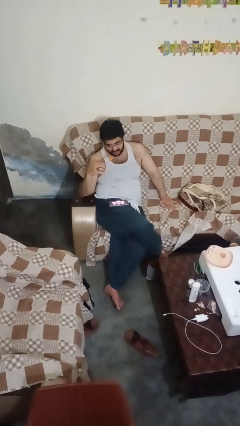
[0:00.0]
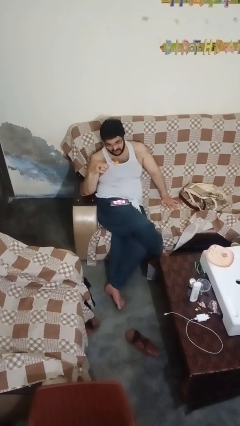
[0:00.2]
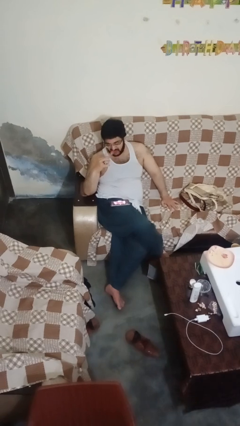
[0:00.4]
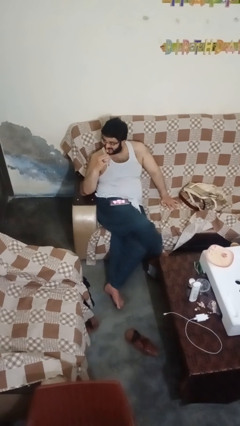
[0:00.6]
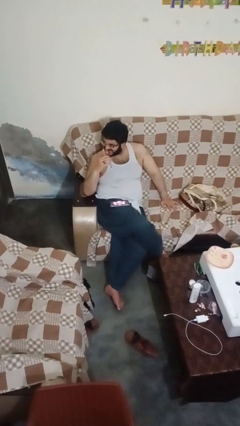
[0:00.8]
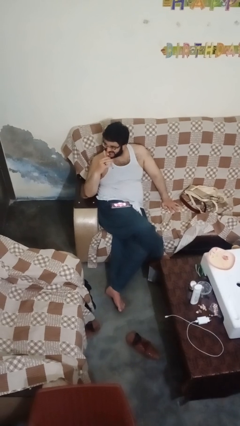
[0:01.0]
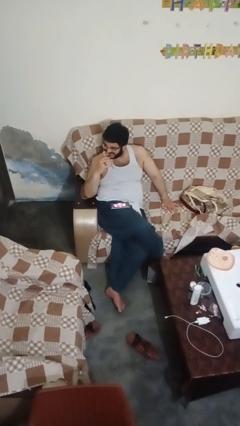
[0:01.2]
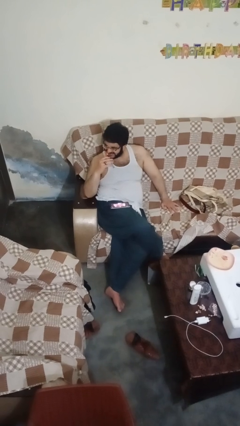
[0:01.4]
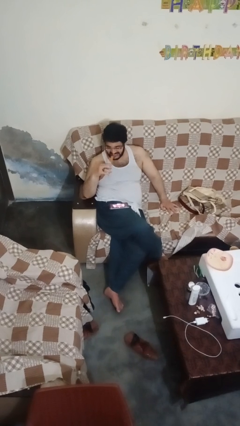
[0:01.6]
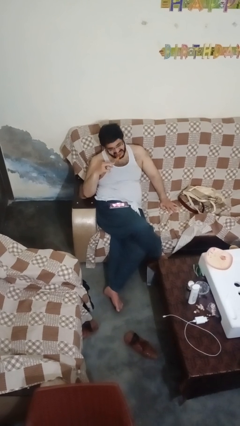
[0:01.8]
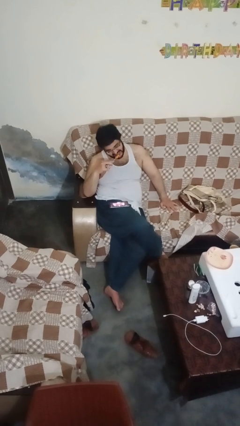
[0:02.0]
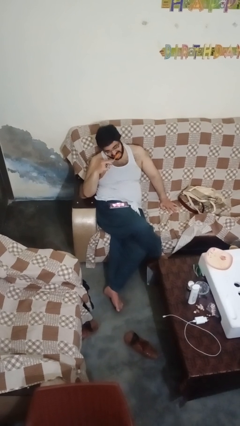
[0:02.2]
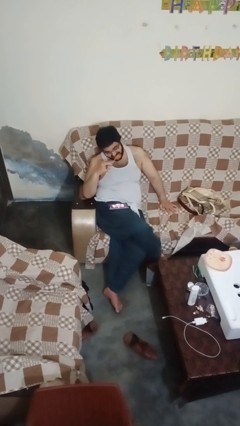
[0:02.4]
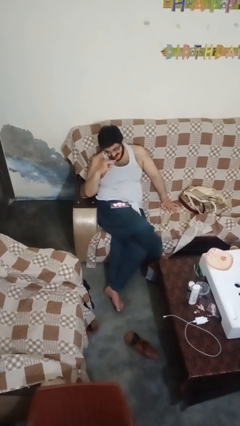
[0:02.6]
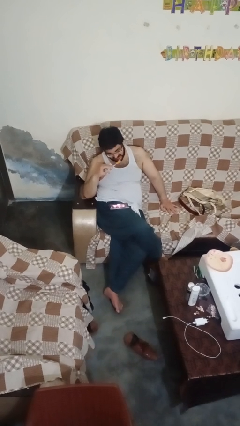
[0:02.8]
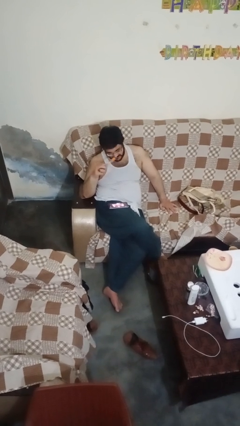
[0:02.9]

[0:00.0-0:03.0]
person brushes teeth

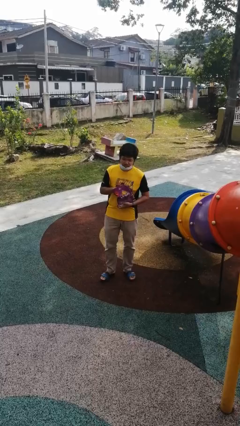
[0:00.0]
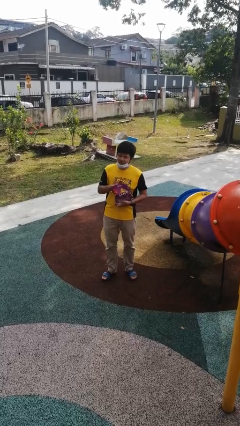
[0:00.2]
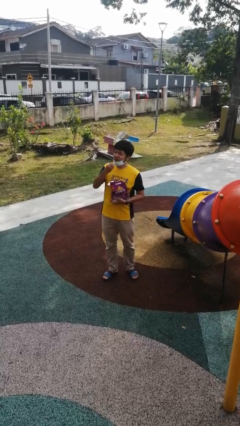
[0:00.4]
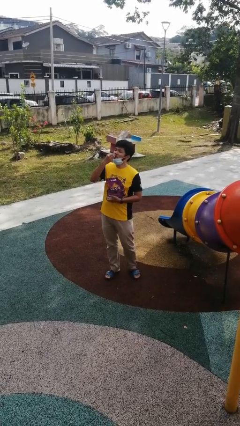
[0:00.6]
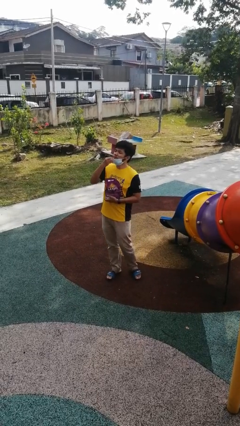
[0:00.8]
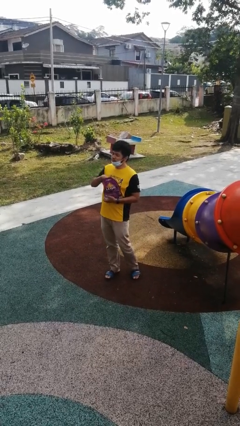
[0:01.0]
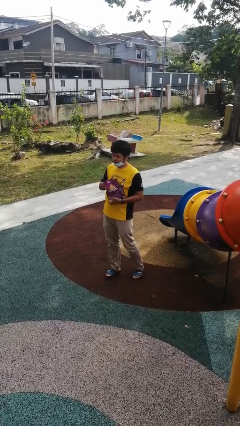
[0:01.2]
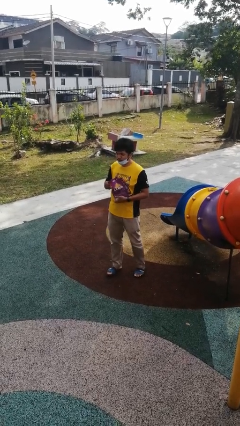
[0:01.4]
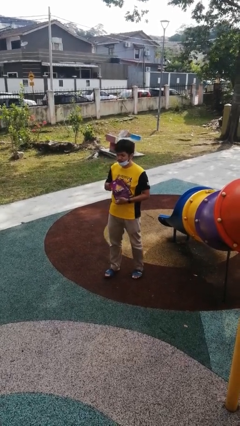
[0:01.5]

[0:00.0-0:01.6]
person eats snack from bag

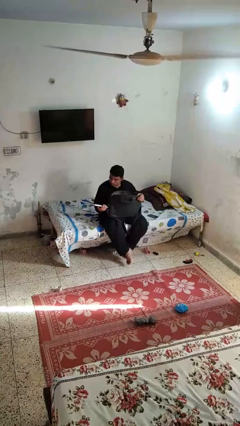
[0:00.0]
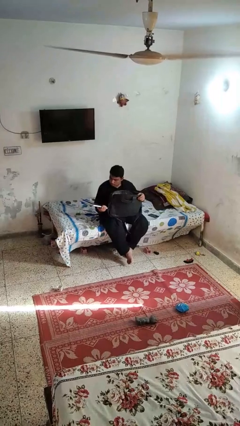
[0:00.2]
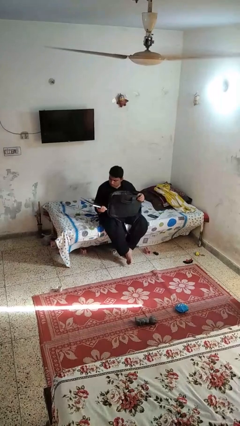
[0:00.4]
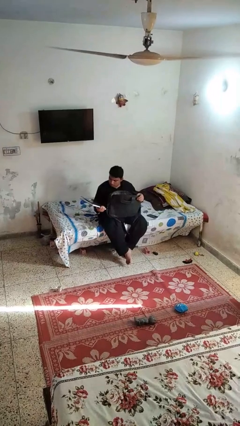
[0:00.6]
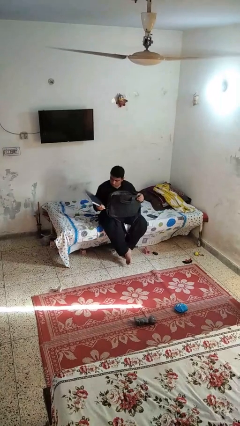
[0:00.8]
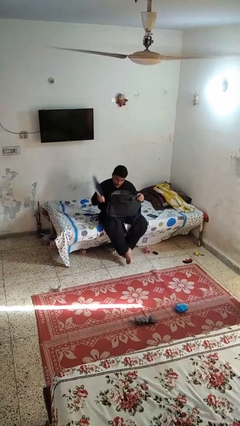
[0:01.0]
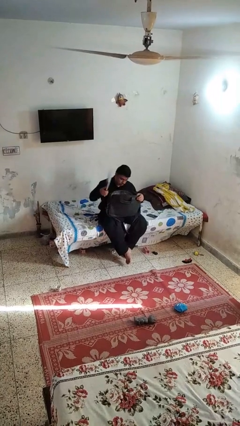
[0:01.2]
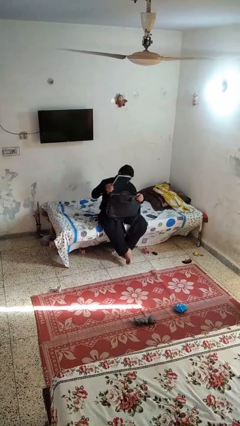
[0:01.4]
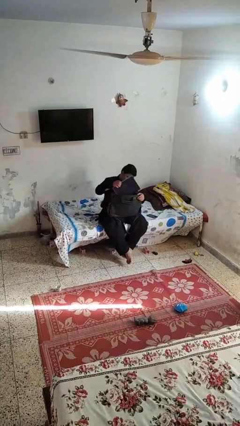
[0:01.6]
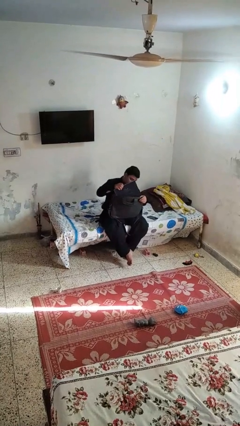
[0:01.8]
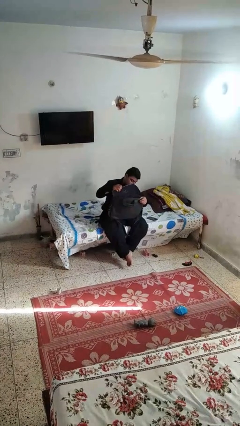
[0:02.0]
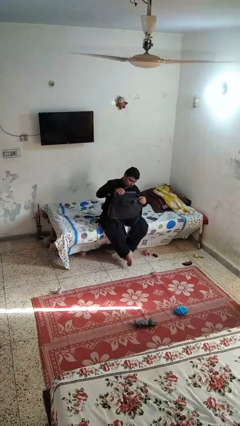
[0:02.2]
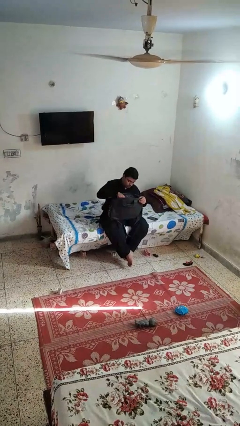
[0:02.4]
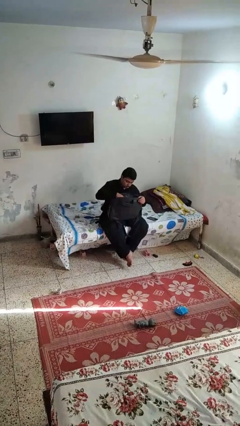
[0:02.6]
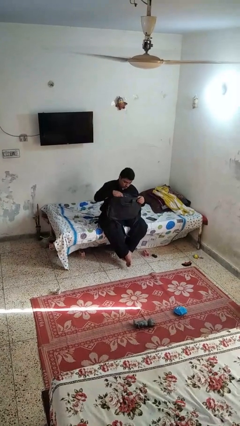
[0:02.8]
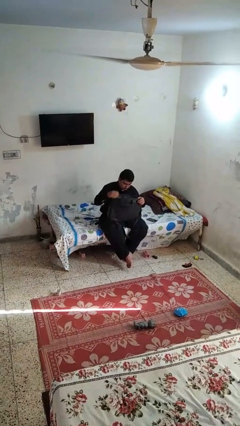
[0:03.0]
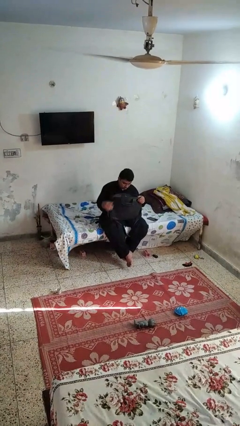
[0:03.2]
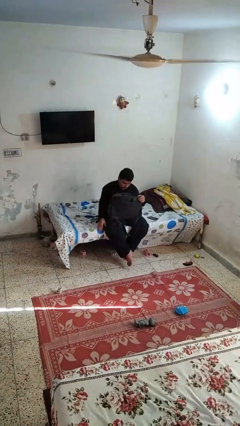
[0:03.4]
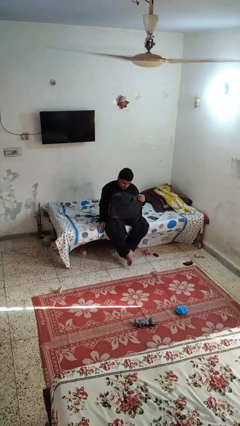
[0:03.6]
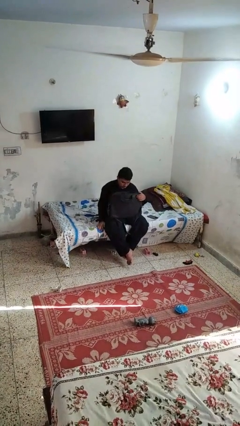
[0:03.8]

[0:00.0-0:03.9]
person puts object into backpack

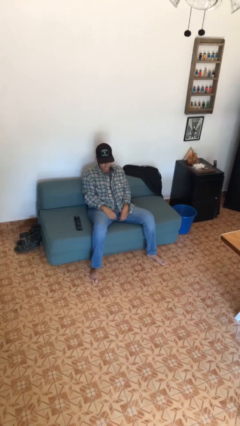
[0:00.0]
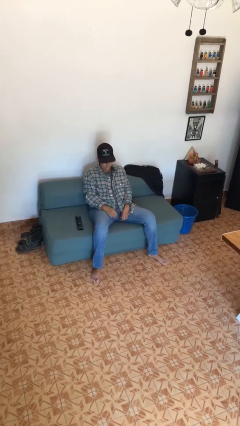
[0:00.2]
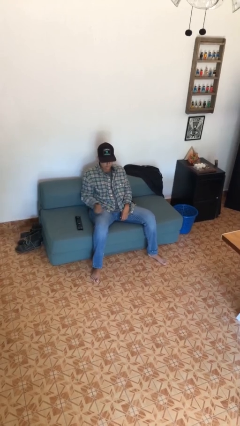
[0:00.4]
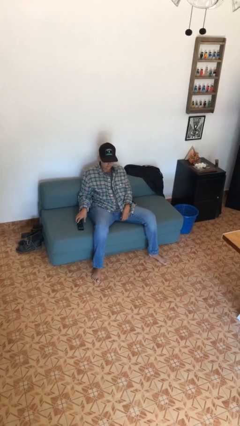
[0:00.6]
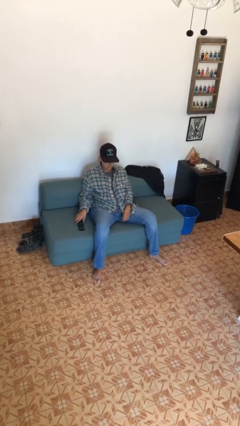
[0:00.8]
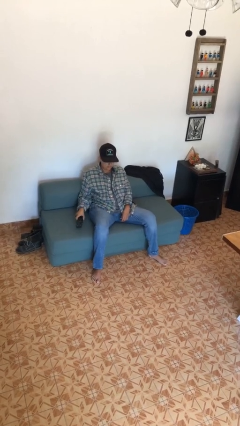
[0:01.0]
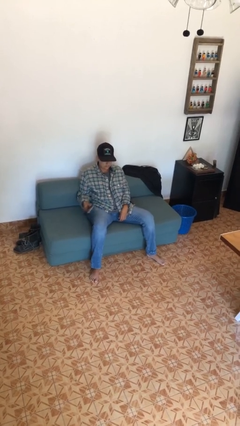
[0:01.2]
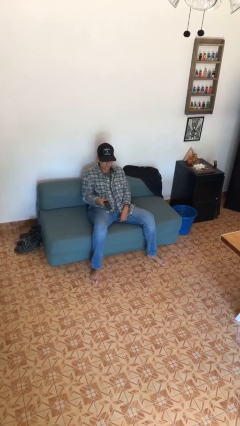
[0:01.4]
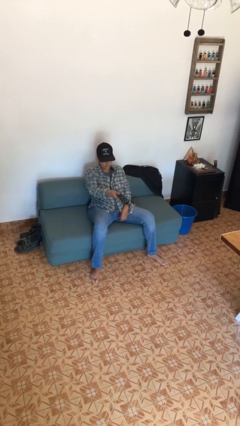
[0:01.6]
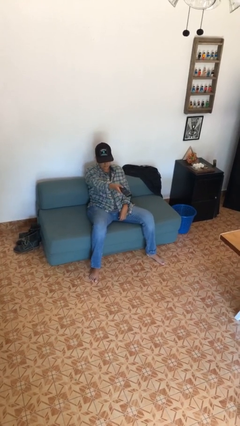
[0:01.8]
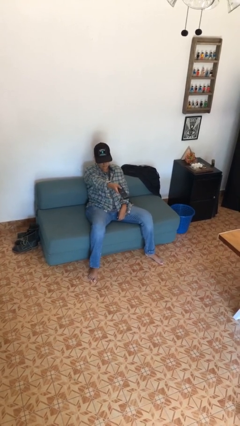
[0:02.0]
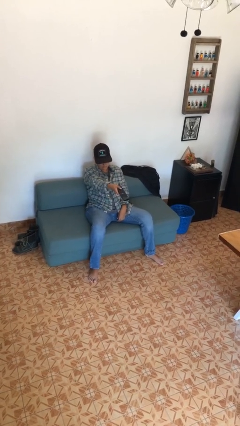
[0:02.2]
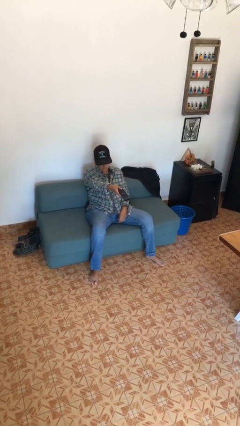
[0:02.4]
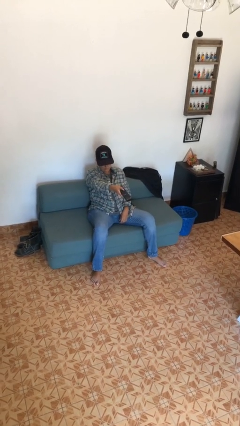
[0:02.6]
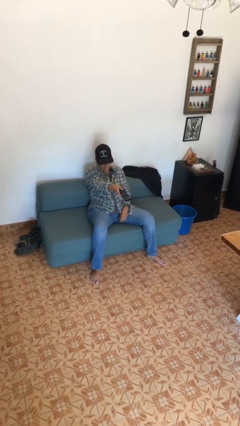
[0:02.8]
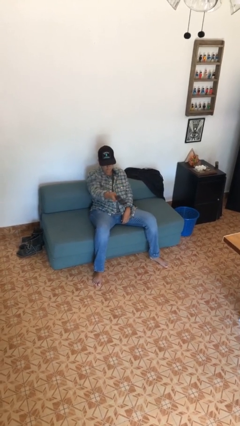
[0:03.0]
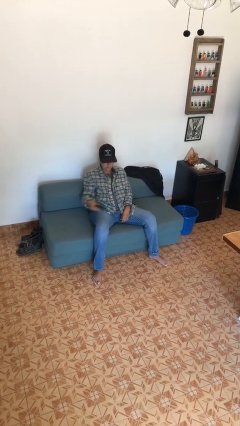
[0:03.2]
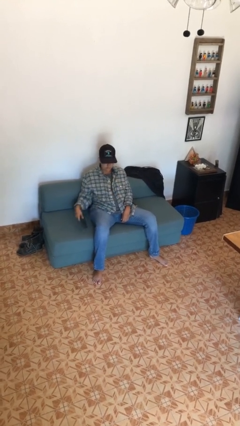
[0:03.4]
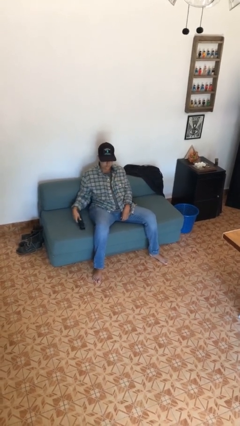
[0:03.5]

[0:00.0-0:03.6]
person uses television remote

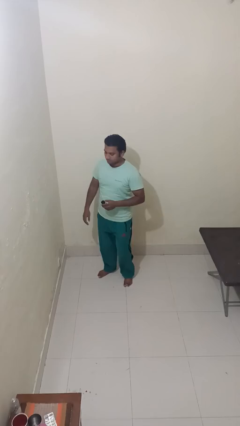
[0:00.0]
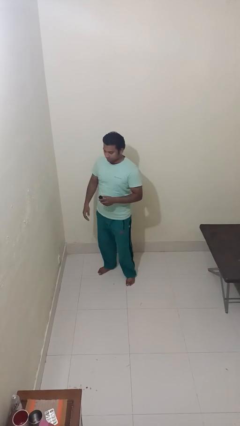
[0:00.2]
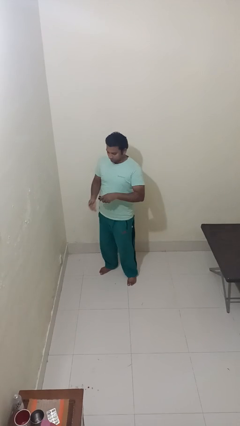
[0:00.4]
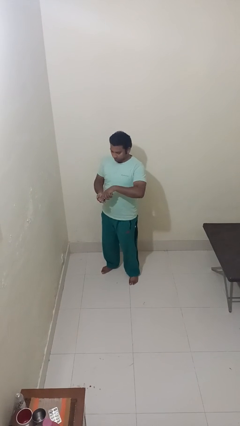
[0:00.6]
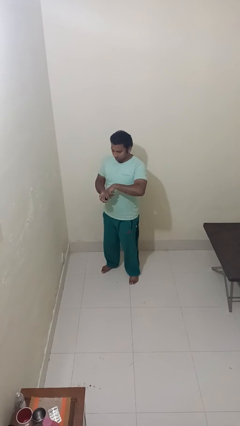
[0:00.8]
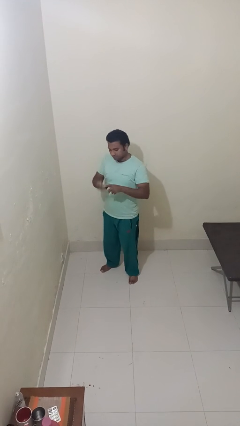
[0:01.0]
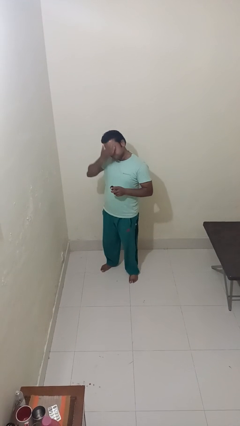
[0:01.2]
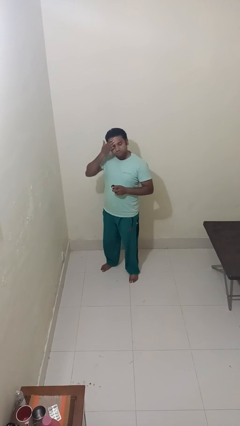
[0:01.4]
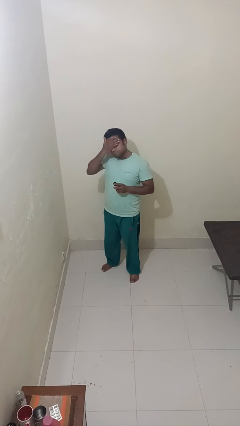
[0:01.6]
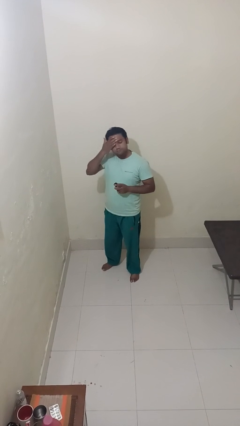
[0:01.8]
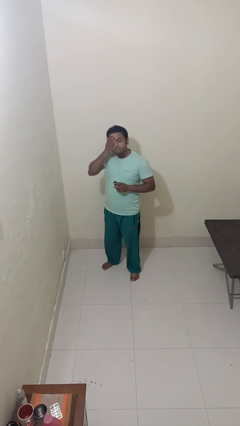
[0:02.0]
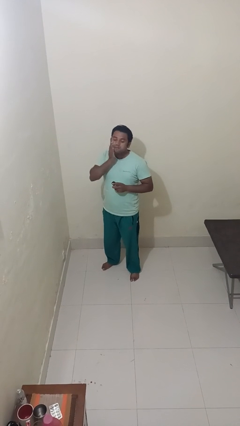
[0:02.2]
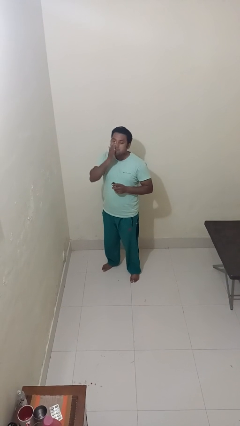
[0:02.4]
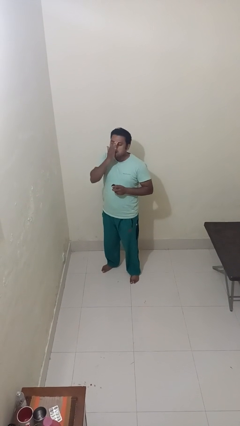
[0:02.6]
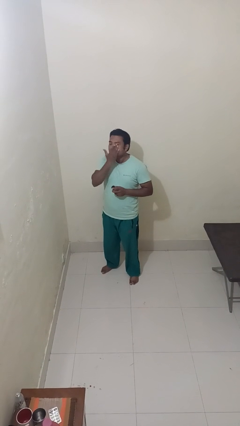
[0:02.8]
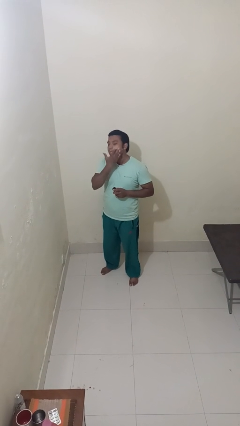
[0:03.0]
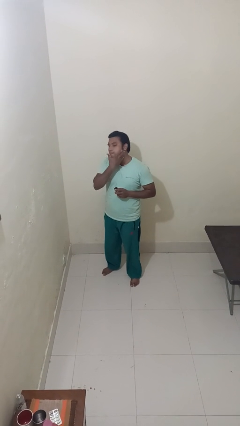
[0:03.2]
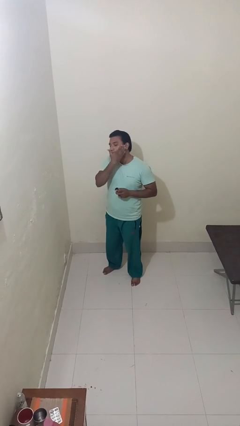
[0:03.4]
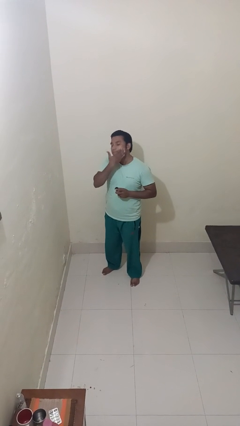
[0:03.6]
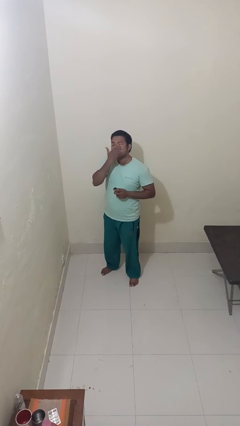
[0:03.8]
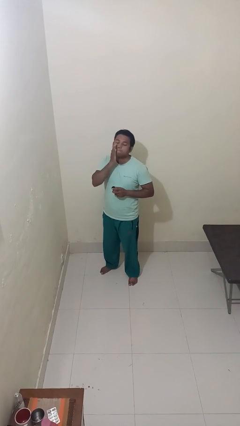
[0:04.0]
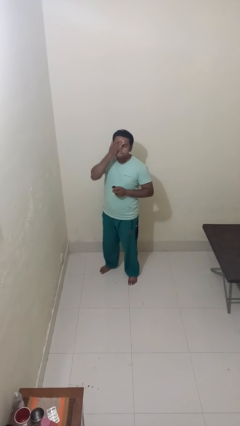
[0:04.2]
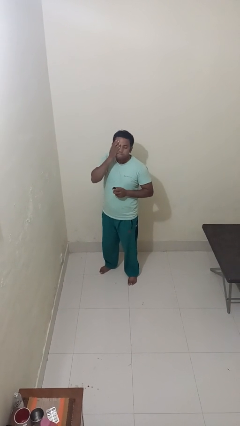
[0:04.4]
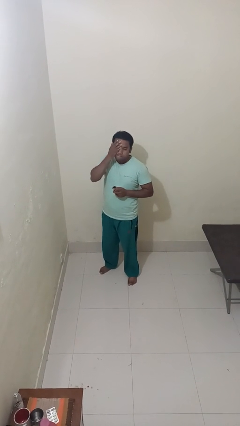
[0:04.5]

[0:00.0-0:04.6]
person applies facial moisturizer

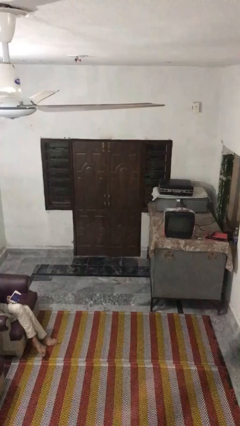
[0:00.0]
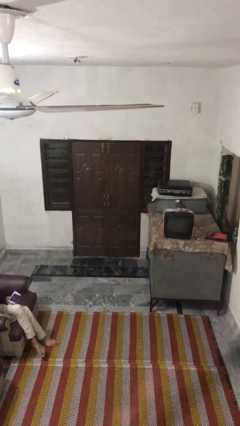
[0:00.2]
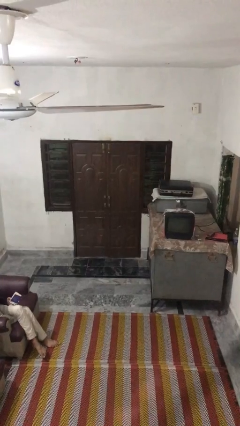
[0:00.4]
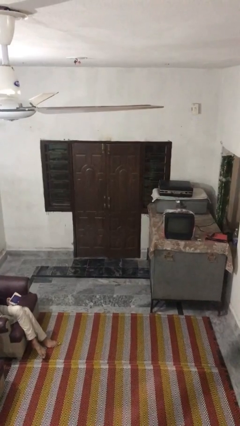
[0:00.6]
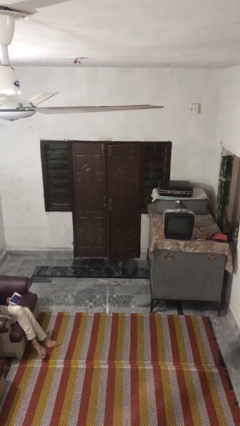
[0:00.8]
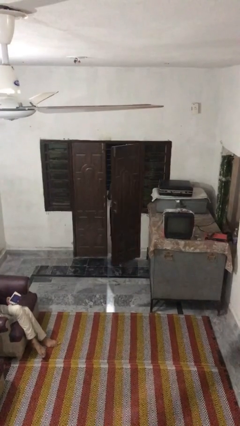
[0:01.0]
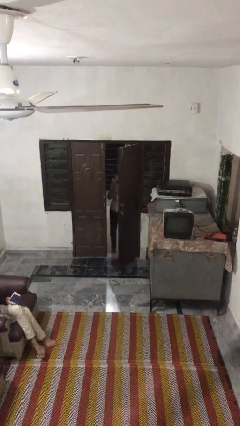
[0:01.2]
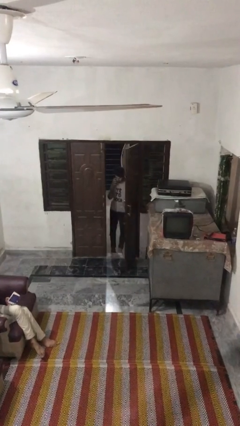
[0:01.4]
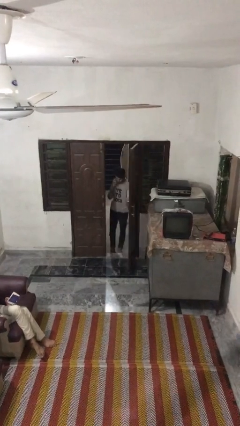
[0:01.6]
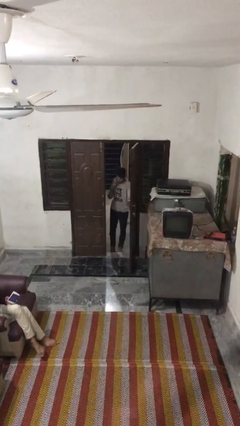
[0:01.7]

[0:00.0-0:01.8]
person opens facility door
